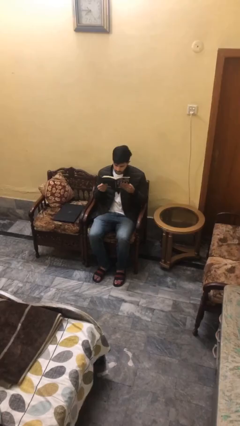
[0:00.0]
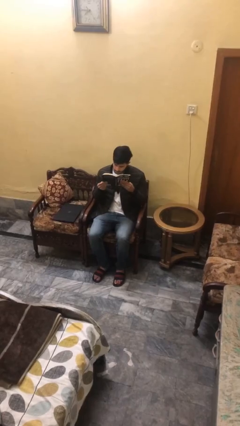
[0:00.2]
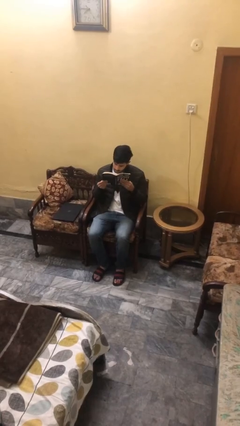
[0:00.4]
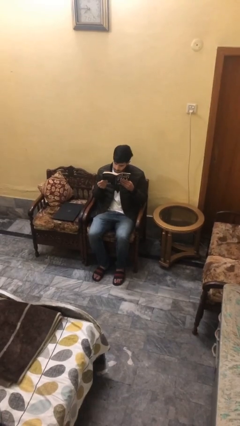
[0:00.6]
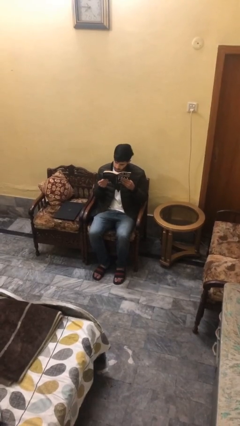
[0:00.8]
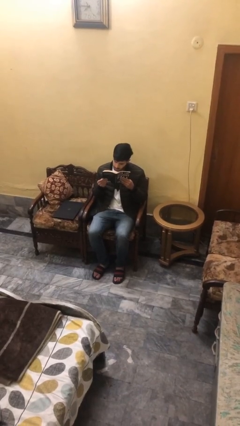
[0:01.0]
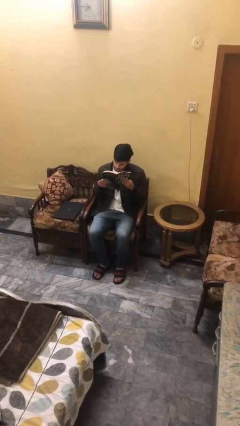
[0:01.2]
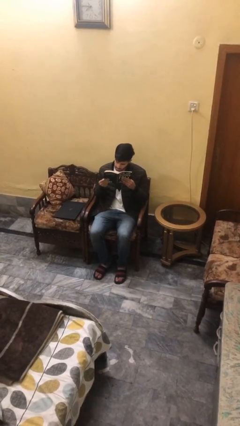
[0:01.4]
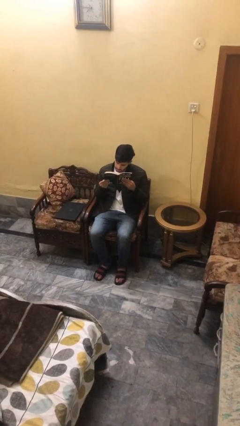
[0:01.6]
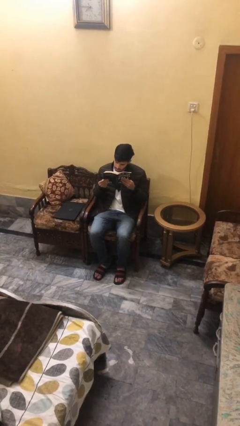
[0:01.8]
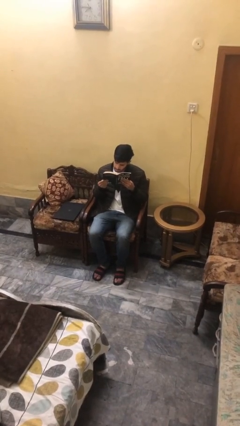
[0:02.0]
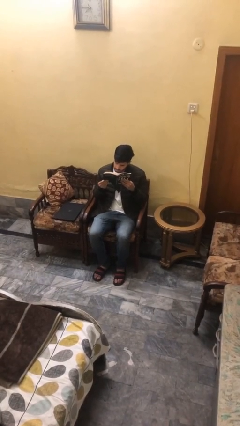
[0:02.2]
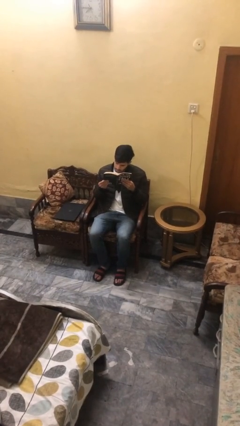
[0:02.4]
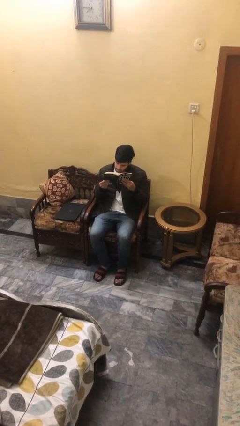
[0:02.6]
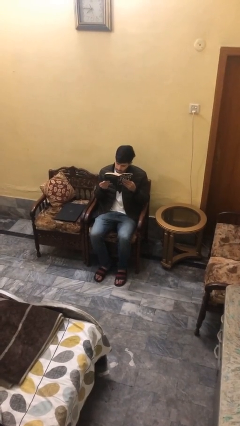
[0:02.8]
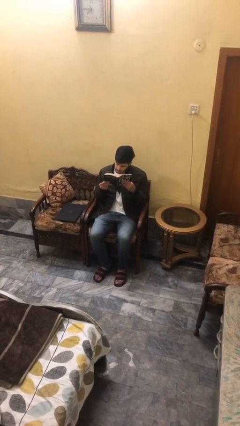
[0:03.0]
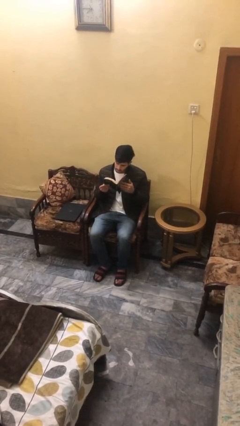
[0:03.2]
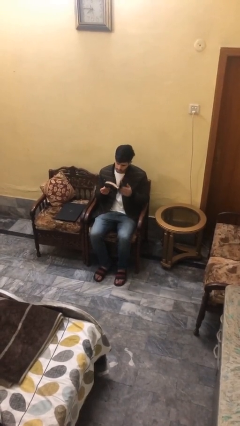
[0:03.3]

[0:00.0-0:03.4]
person reads document

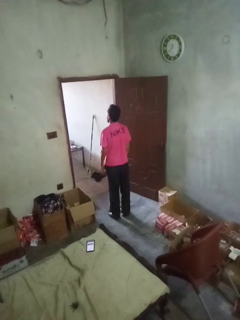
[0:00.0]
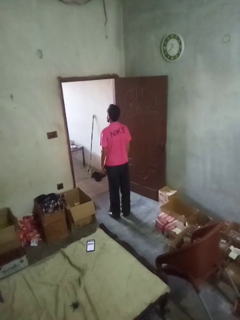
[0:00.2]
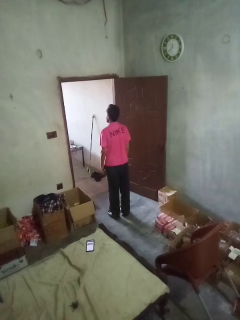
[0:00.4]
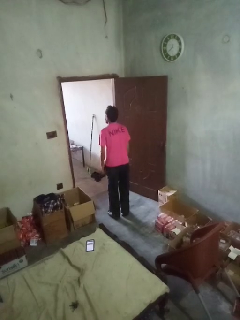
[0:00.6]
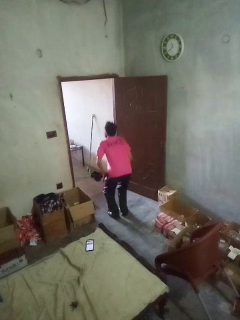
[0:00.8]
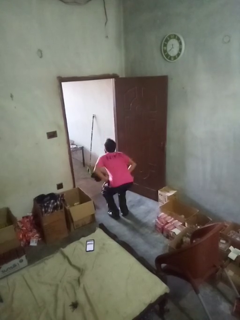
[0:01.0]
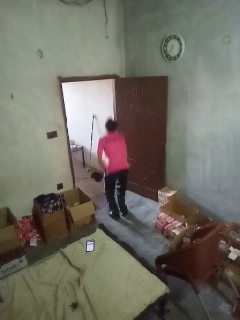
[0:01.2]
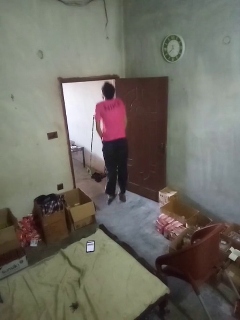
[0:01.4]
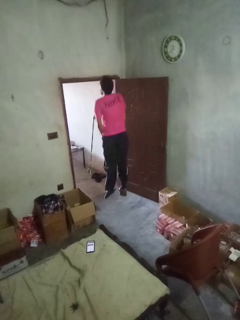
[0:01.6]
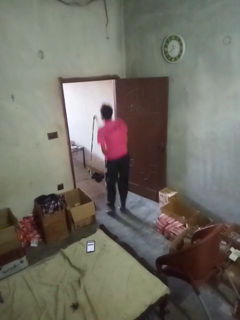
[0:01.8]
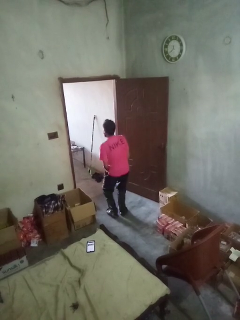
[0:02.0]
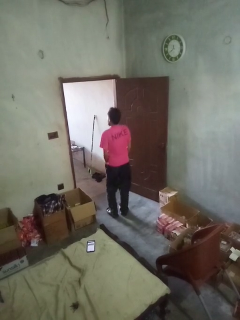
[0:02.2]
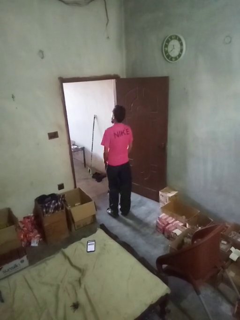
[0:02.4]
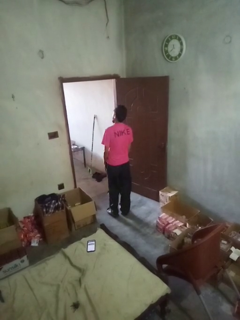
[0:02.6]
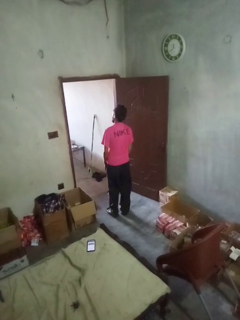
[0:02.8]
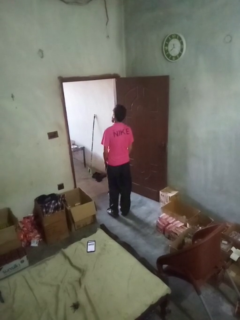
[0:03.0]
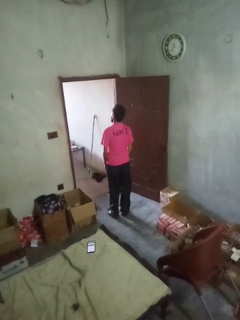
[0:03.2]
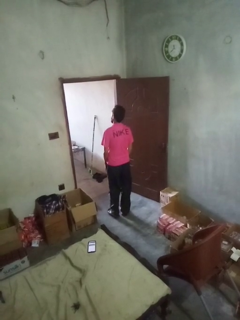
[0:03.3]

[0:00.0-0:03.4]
person jumps

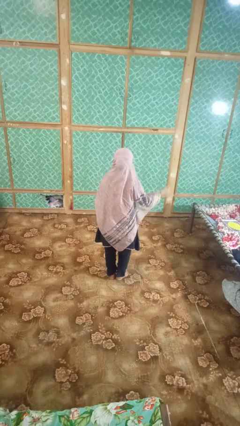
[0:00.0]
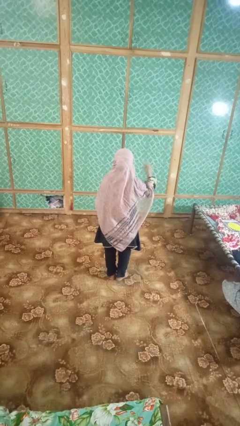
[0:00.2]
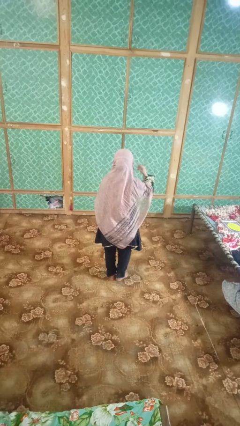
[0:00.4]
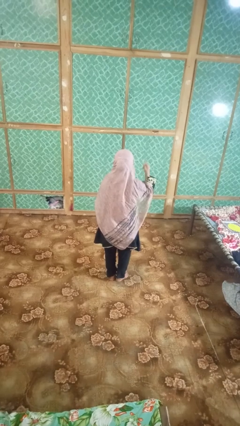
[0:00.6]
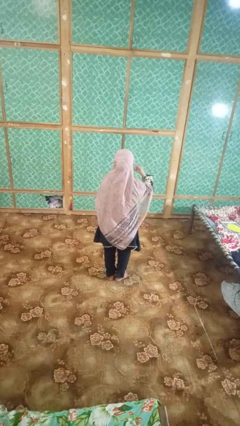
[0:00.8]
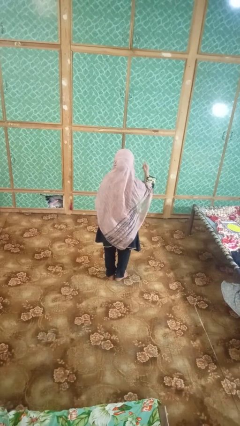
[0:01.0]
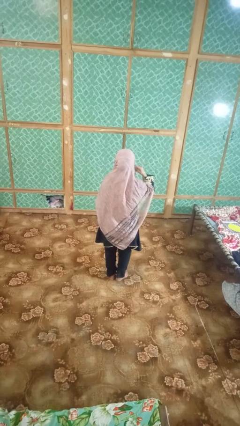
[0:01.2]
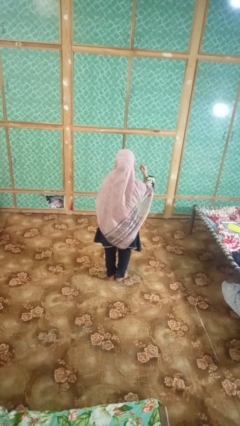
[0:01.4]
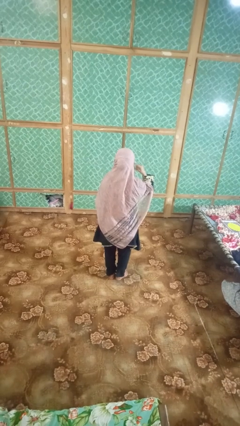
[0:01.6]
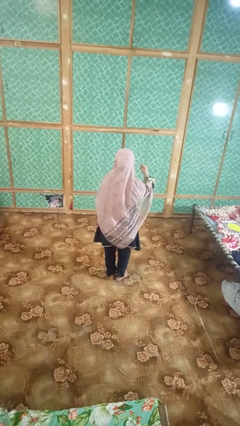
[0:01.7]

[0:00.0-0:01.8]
person gestures listen closely

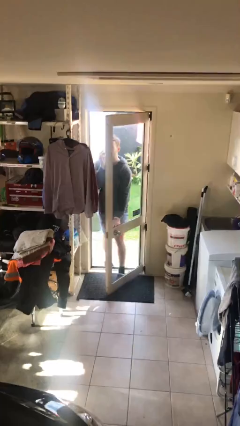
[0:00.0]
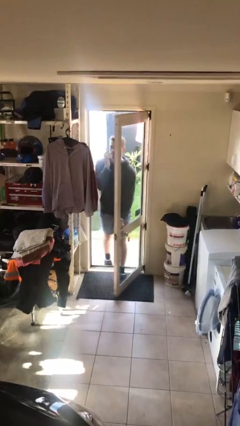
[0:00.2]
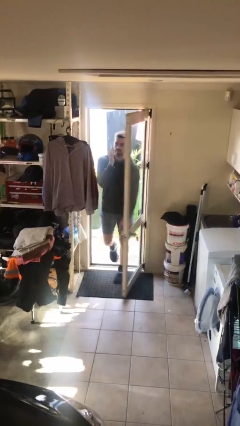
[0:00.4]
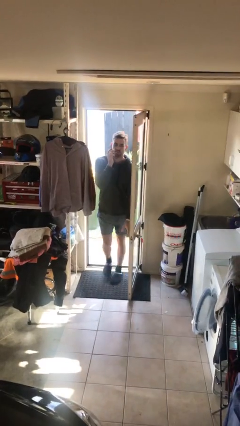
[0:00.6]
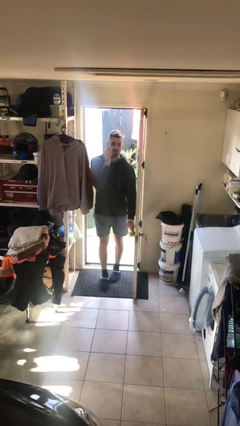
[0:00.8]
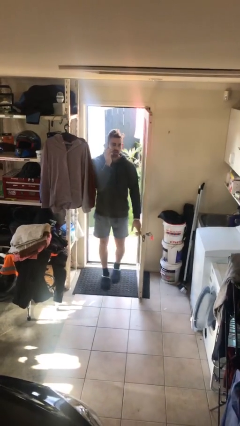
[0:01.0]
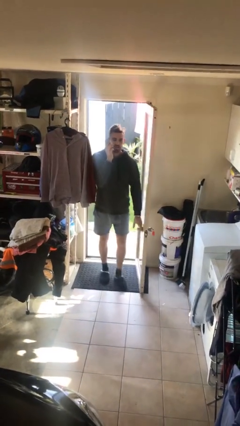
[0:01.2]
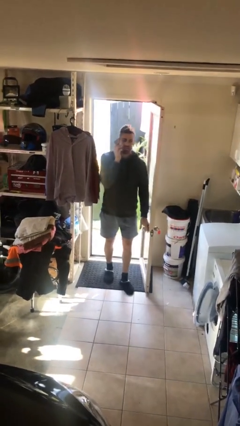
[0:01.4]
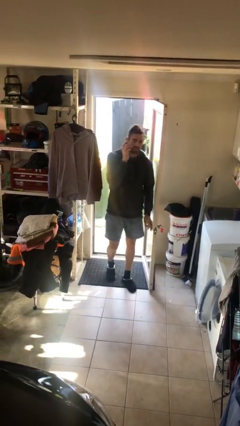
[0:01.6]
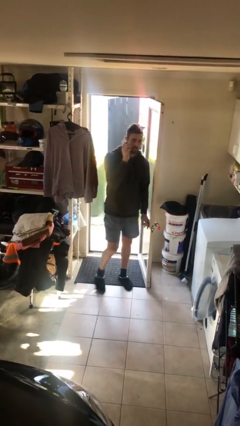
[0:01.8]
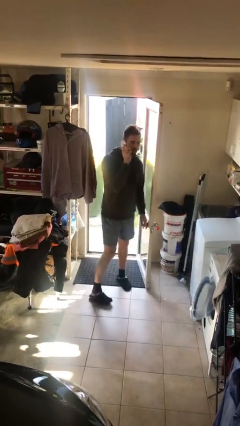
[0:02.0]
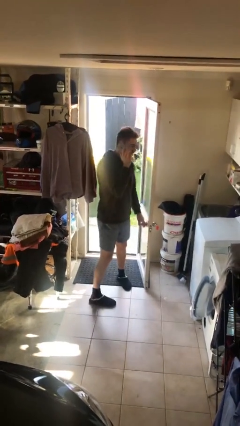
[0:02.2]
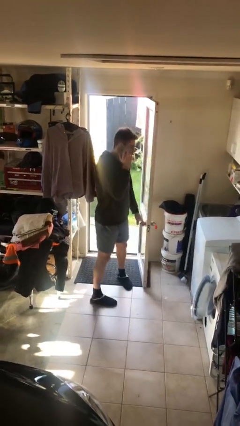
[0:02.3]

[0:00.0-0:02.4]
person enters scene through structure

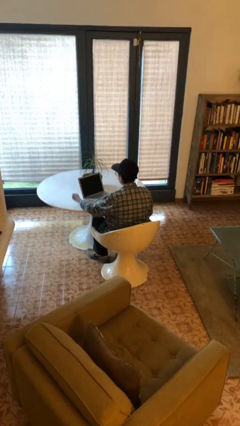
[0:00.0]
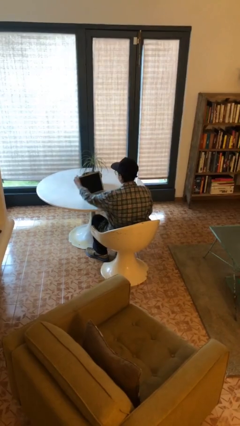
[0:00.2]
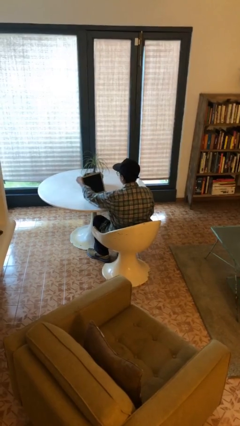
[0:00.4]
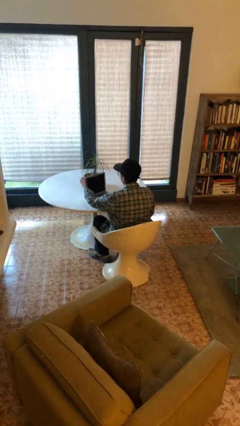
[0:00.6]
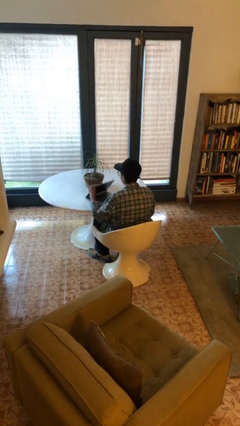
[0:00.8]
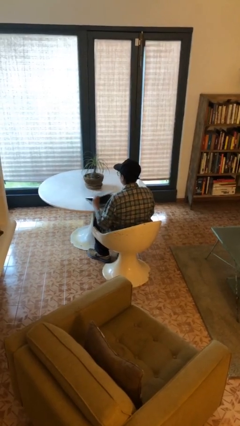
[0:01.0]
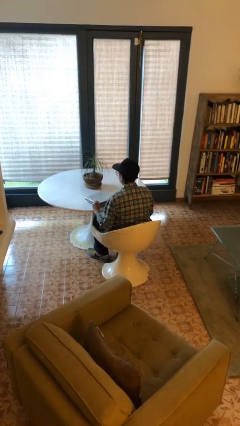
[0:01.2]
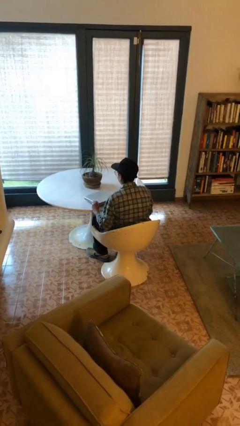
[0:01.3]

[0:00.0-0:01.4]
person closes laptop

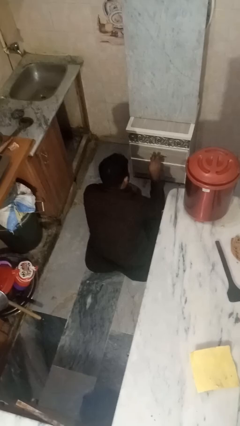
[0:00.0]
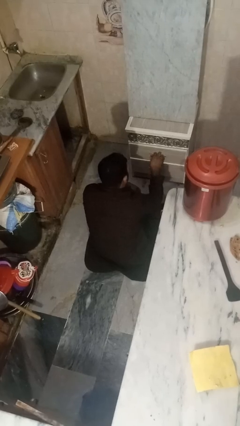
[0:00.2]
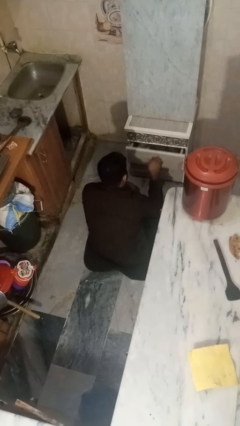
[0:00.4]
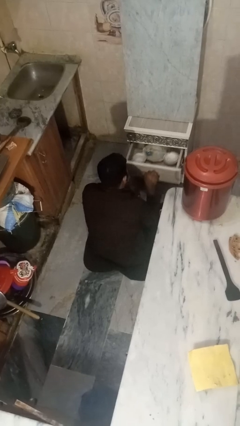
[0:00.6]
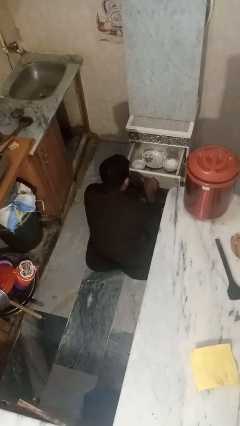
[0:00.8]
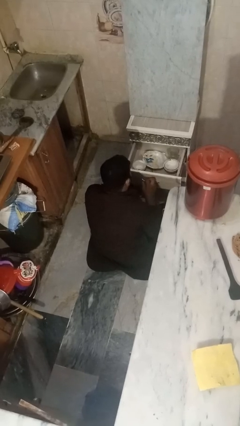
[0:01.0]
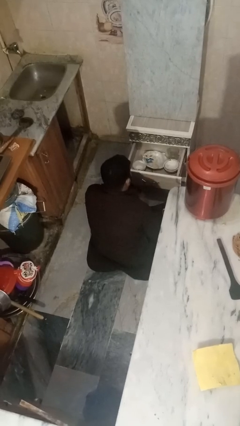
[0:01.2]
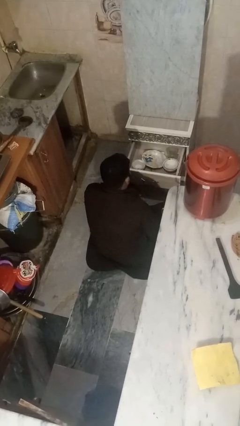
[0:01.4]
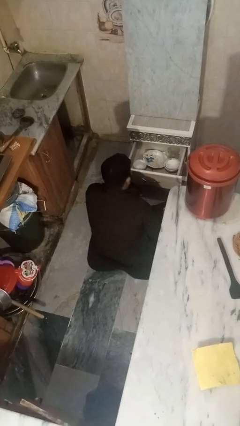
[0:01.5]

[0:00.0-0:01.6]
person opens kitchen drawer

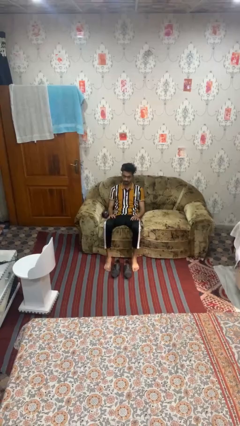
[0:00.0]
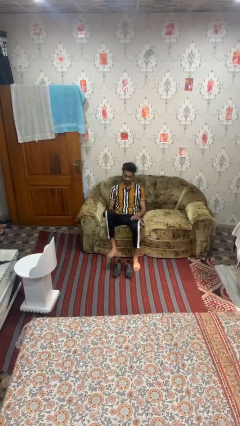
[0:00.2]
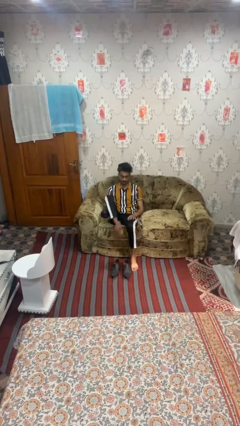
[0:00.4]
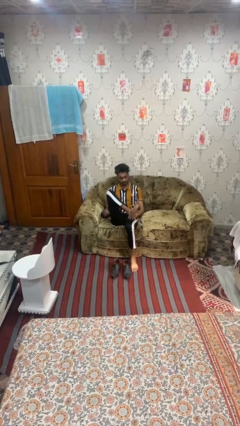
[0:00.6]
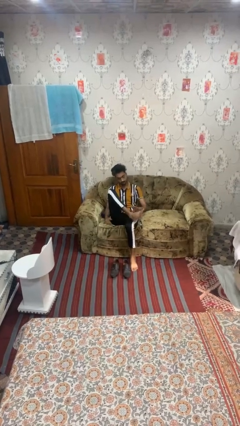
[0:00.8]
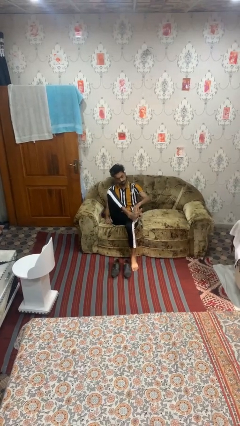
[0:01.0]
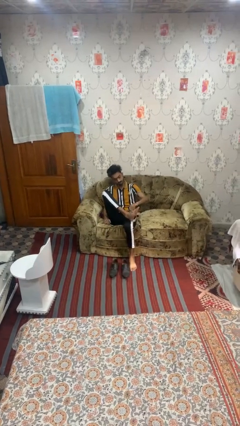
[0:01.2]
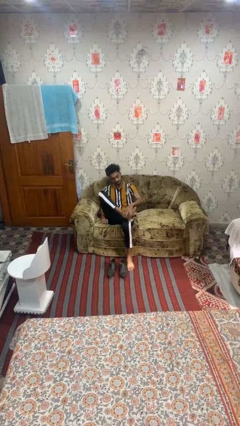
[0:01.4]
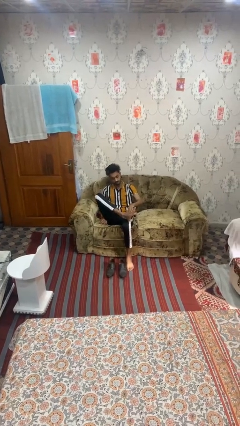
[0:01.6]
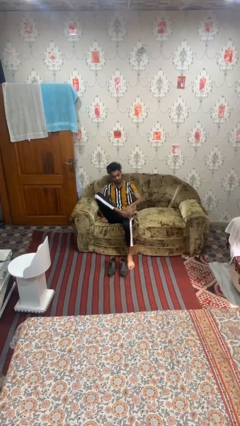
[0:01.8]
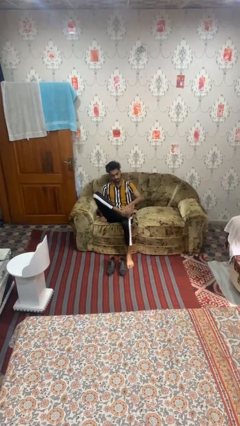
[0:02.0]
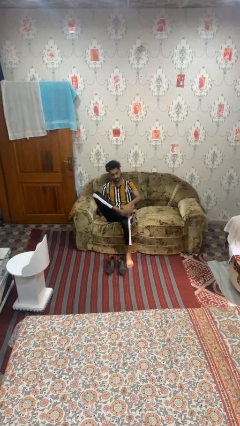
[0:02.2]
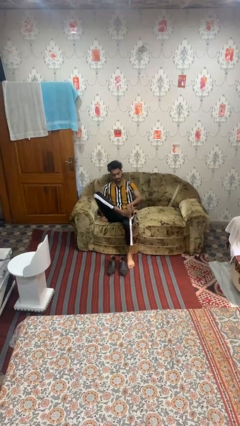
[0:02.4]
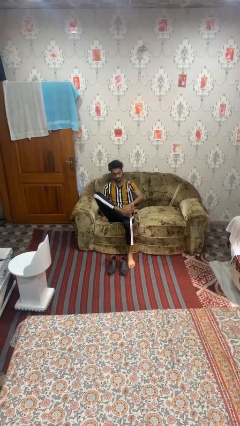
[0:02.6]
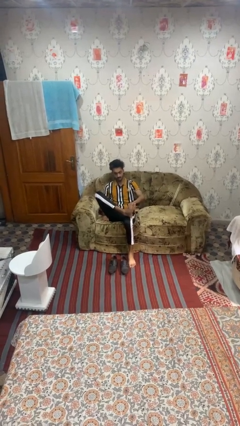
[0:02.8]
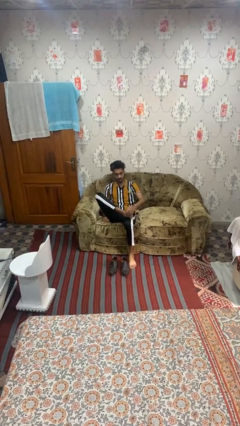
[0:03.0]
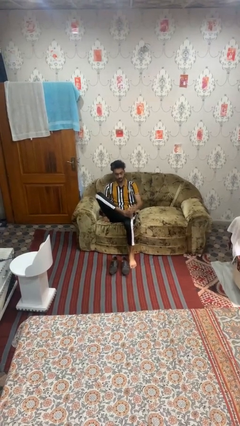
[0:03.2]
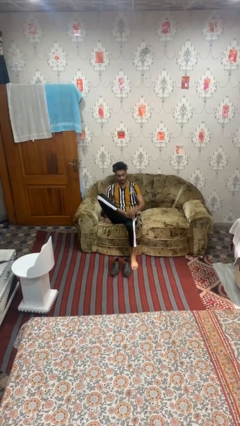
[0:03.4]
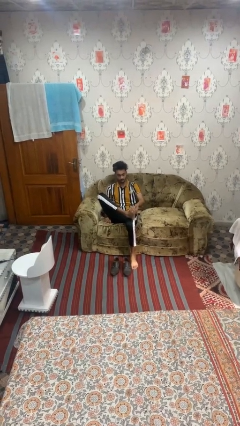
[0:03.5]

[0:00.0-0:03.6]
person rubs foot

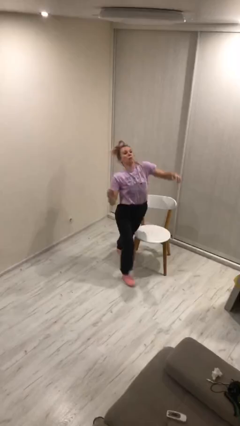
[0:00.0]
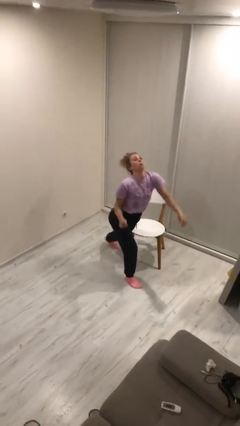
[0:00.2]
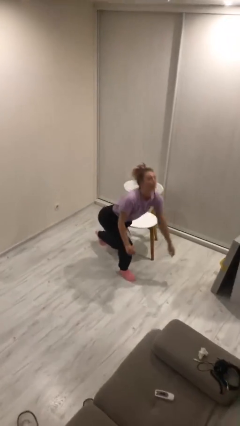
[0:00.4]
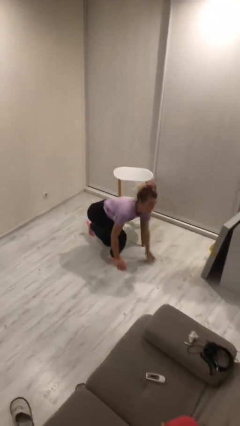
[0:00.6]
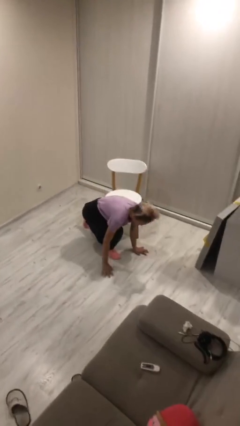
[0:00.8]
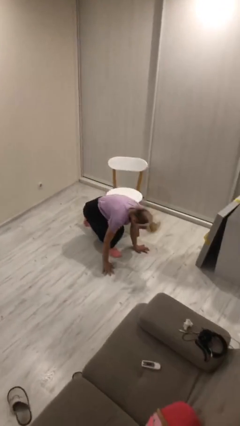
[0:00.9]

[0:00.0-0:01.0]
person trips on object on floor
